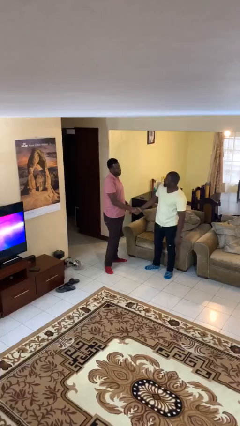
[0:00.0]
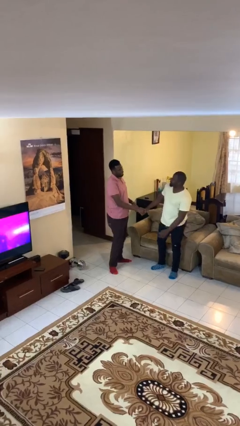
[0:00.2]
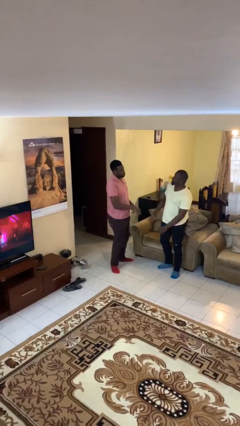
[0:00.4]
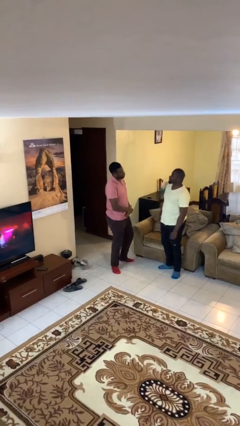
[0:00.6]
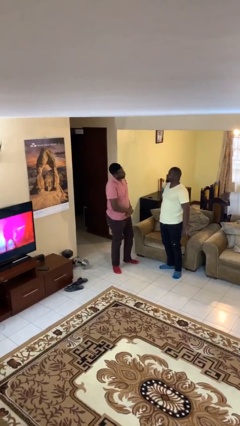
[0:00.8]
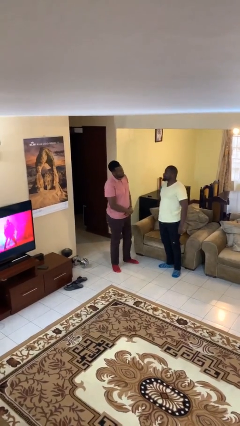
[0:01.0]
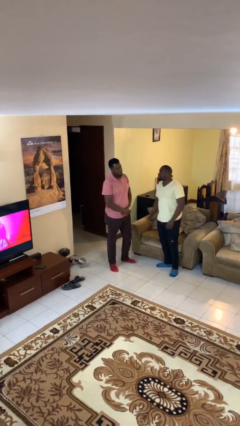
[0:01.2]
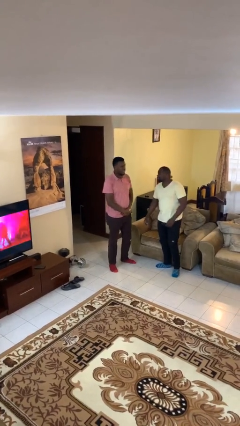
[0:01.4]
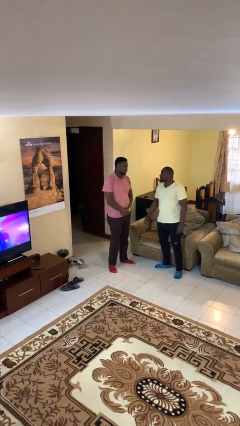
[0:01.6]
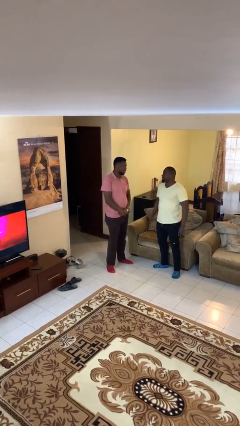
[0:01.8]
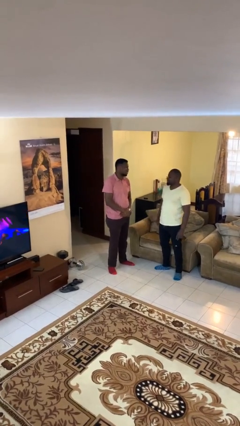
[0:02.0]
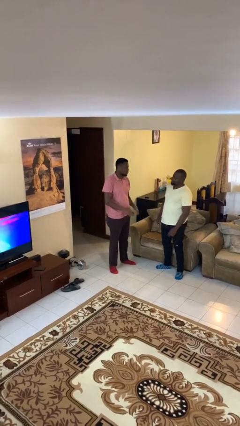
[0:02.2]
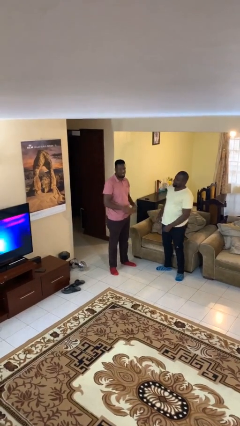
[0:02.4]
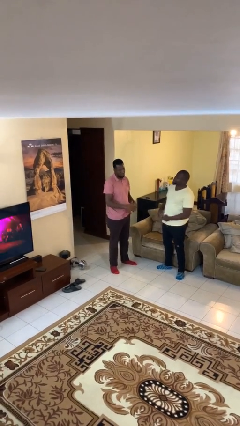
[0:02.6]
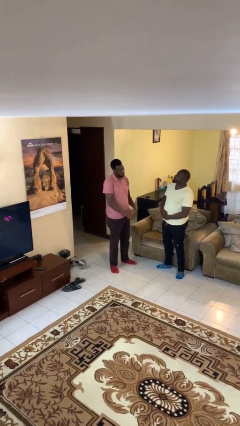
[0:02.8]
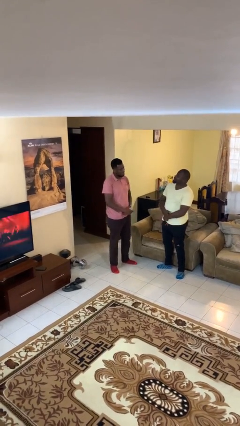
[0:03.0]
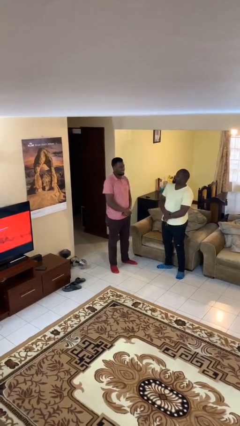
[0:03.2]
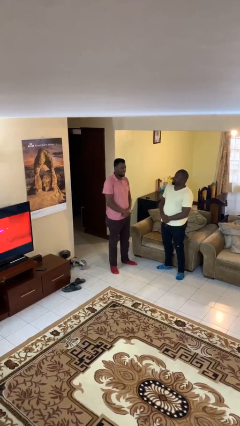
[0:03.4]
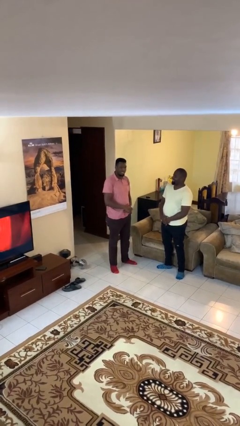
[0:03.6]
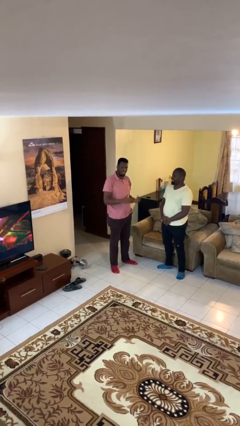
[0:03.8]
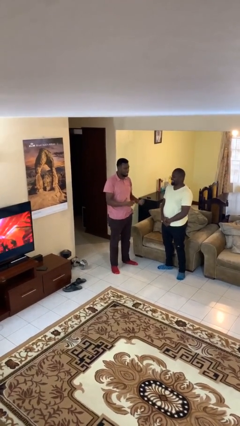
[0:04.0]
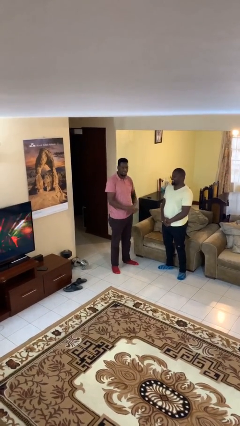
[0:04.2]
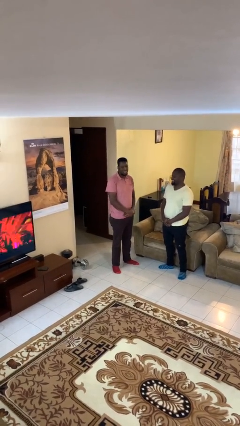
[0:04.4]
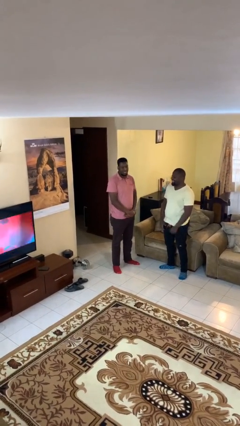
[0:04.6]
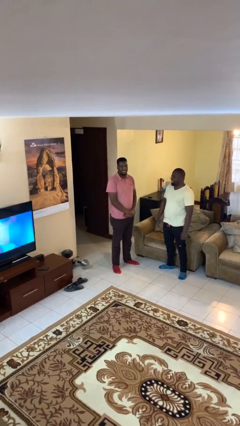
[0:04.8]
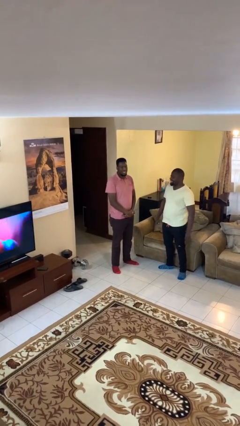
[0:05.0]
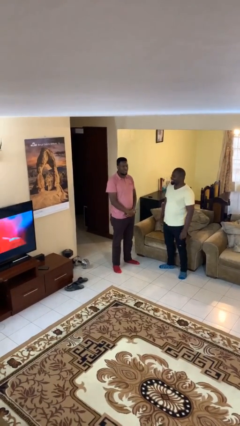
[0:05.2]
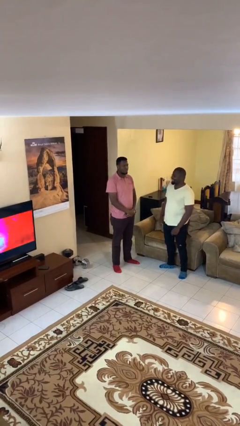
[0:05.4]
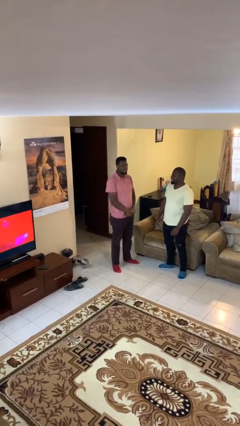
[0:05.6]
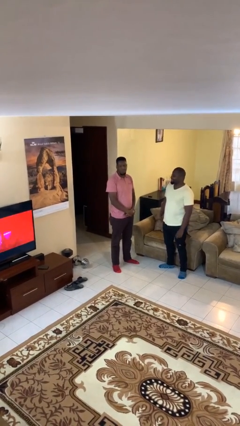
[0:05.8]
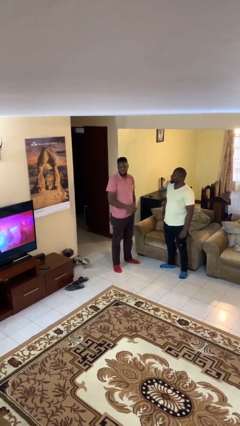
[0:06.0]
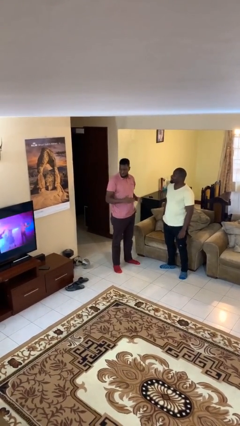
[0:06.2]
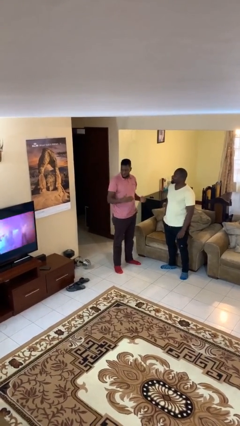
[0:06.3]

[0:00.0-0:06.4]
person talks to person

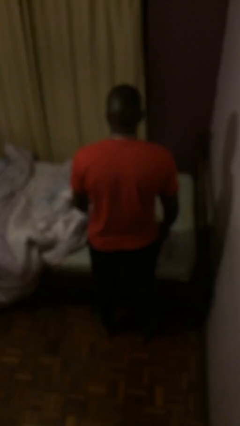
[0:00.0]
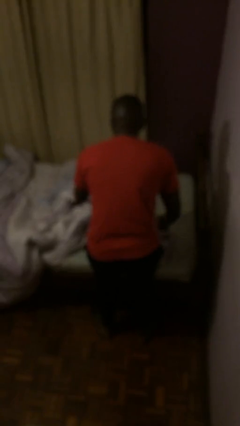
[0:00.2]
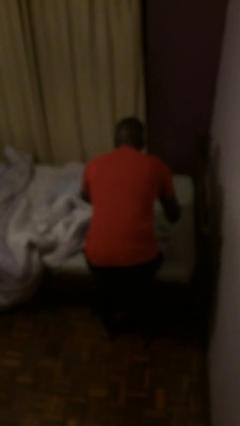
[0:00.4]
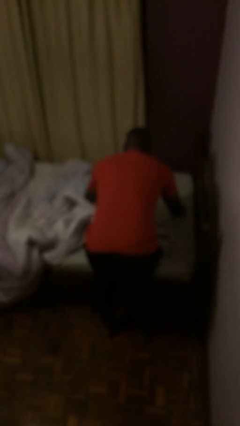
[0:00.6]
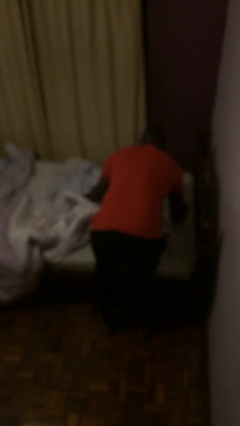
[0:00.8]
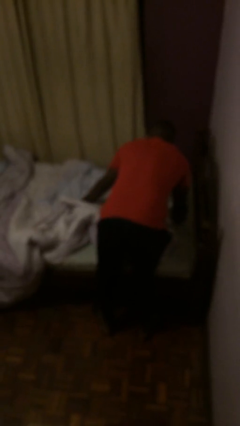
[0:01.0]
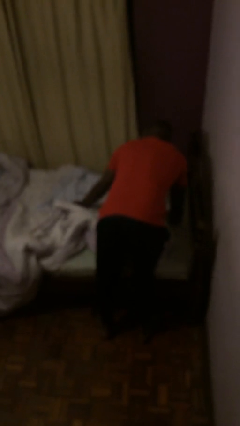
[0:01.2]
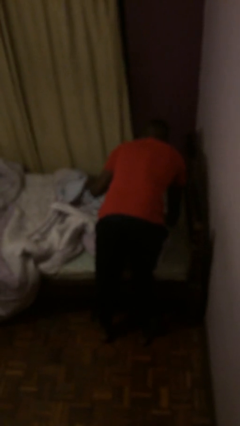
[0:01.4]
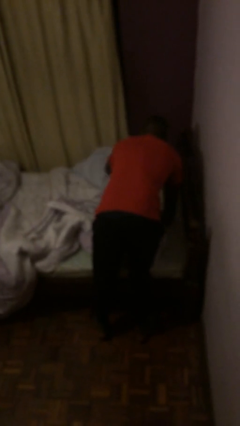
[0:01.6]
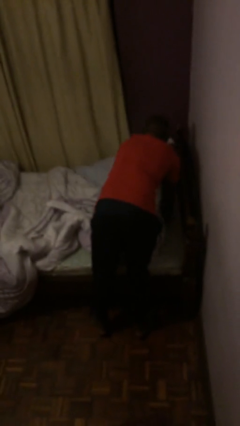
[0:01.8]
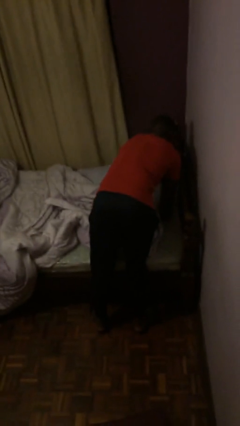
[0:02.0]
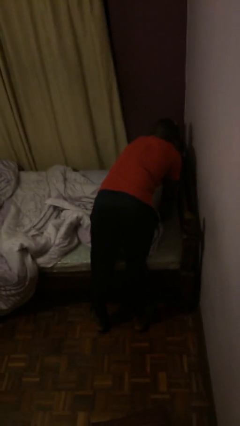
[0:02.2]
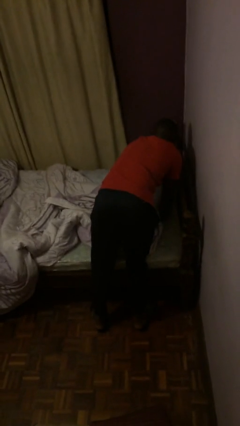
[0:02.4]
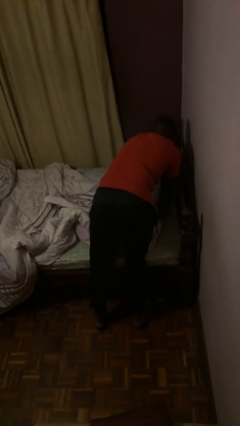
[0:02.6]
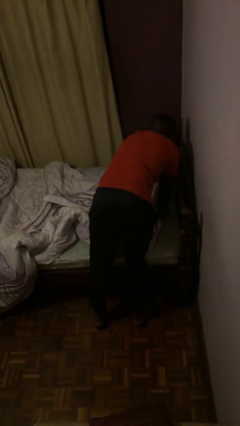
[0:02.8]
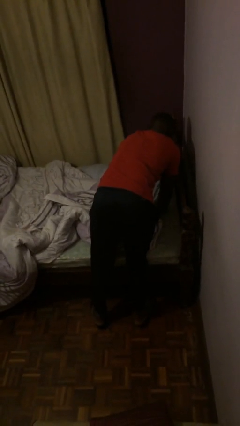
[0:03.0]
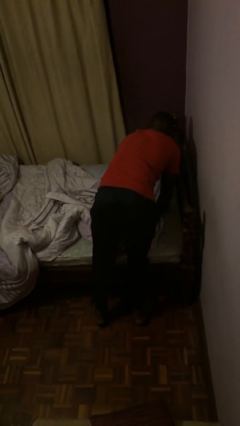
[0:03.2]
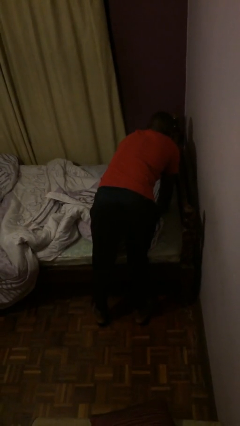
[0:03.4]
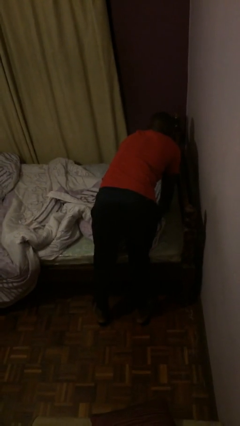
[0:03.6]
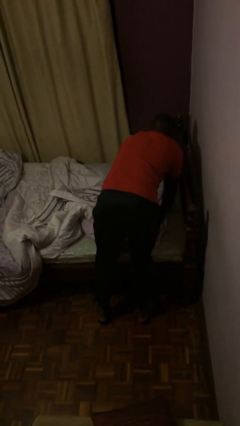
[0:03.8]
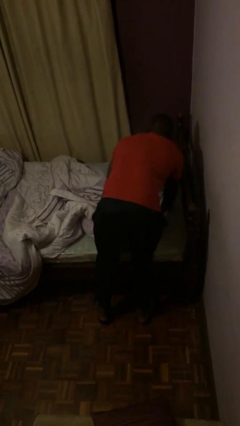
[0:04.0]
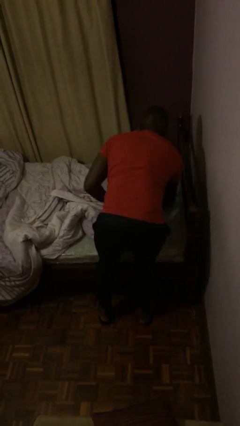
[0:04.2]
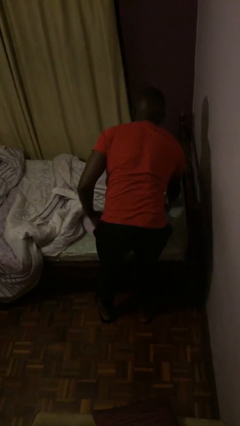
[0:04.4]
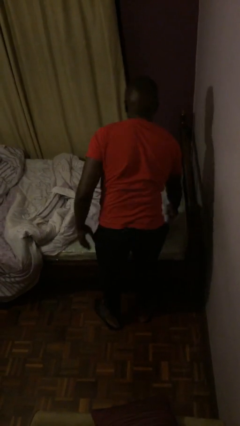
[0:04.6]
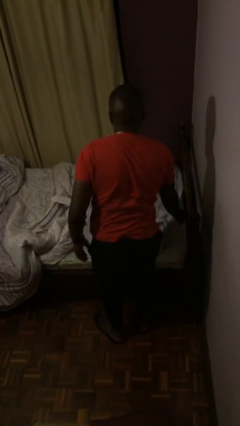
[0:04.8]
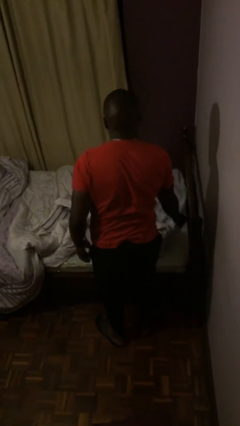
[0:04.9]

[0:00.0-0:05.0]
person makes bed

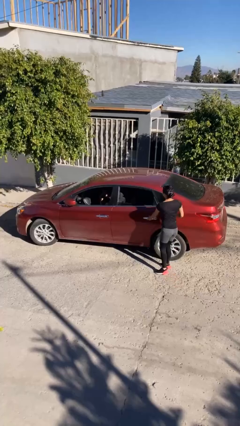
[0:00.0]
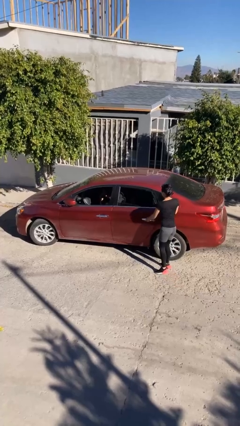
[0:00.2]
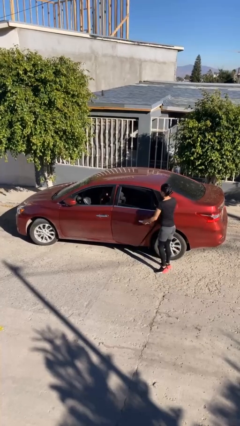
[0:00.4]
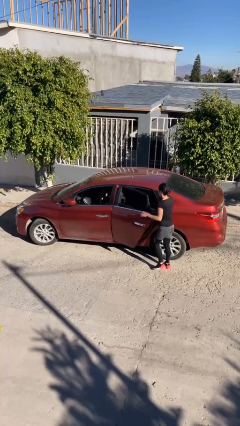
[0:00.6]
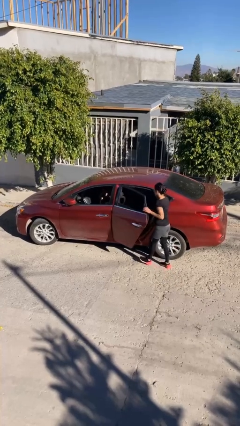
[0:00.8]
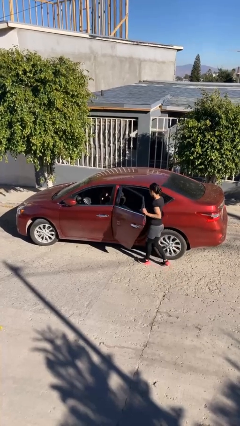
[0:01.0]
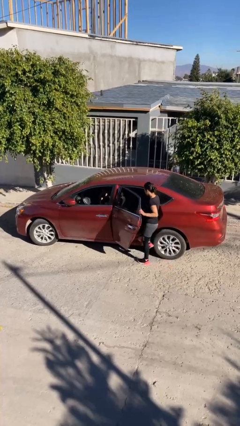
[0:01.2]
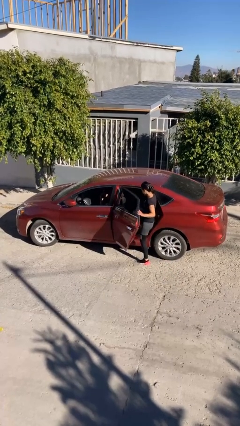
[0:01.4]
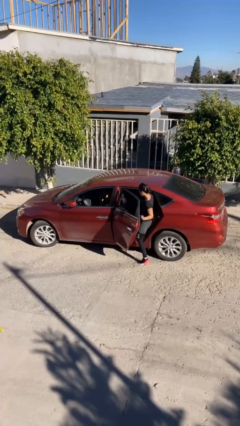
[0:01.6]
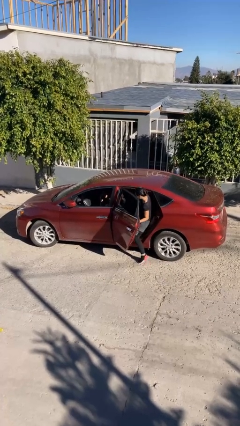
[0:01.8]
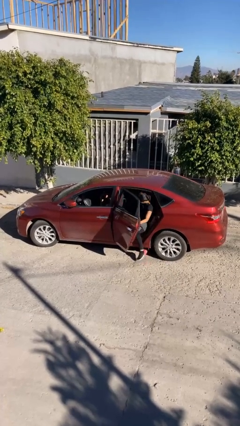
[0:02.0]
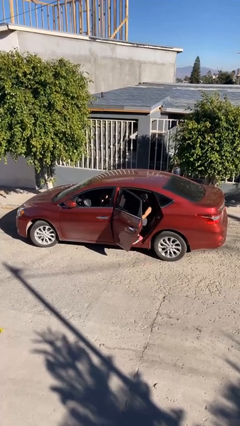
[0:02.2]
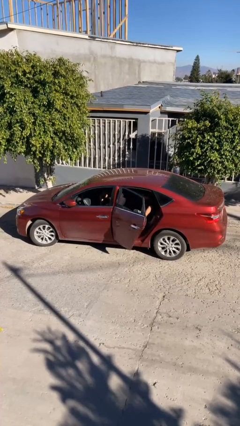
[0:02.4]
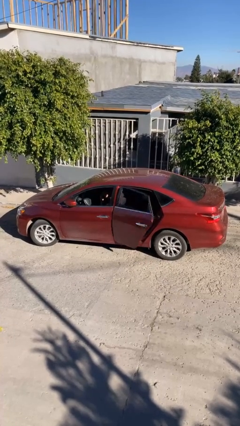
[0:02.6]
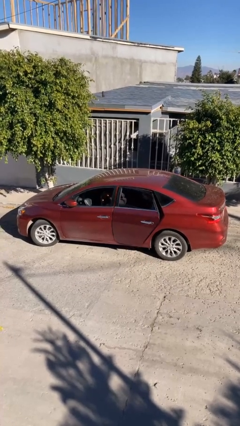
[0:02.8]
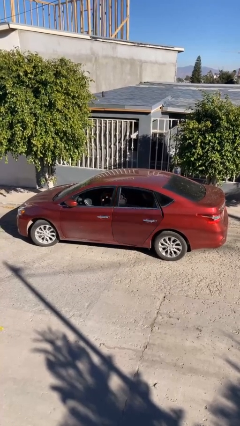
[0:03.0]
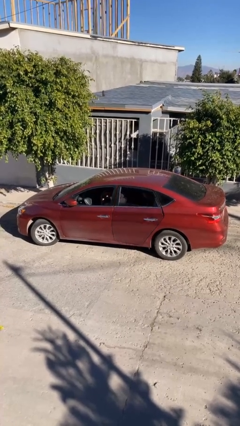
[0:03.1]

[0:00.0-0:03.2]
car picks up person

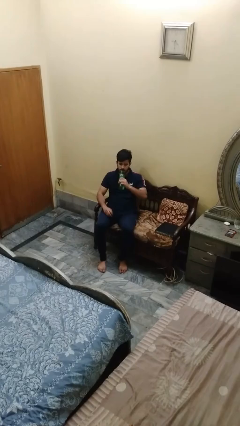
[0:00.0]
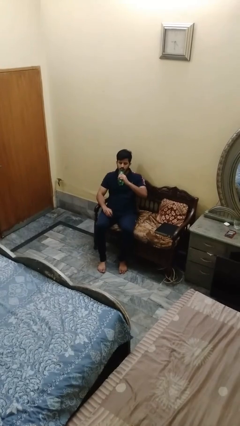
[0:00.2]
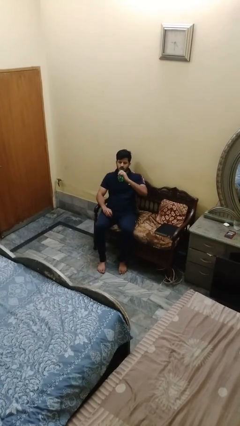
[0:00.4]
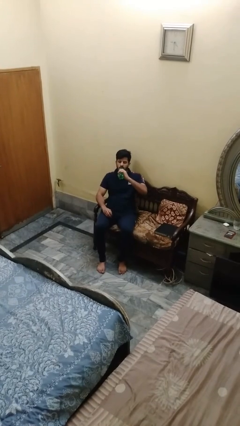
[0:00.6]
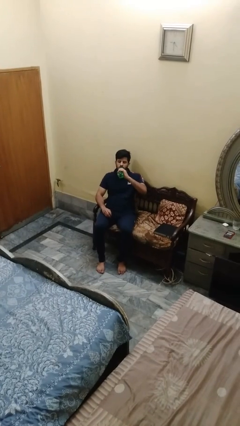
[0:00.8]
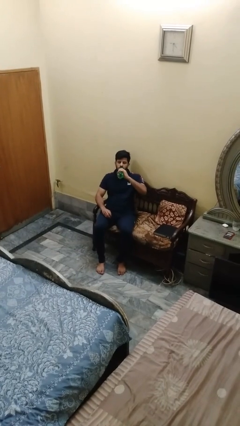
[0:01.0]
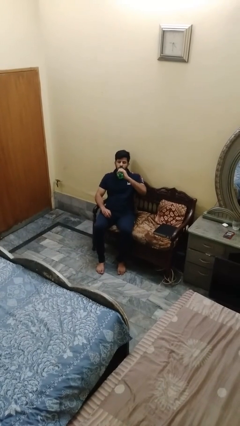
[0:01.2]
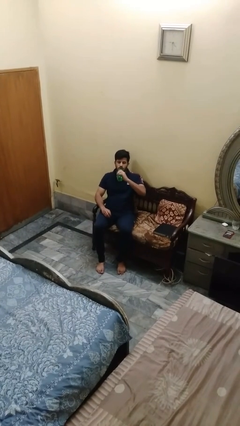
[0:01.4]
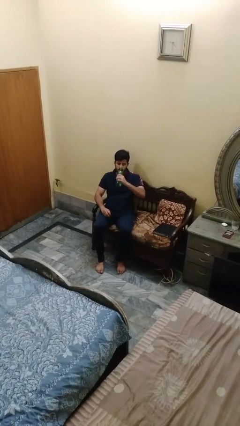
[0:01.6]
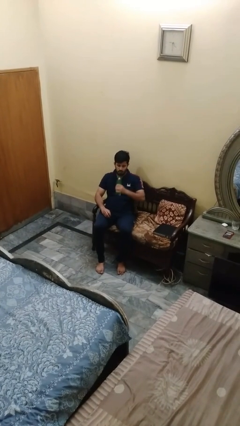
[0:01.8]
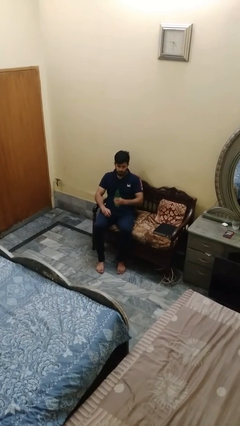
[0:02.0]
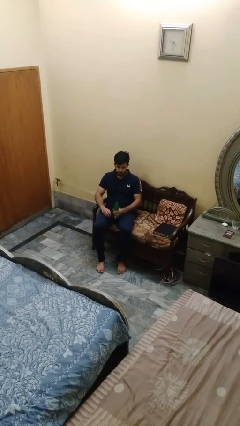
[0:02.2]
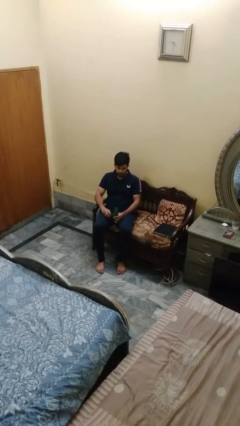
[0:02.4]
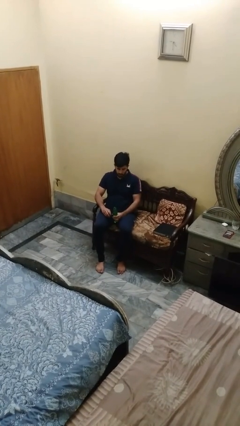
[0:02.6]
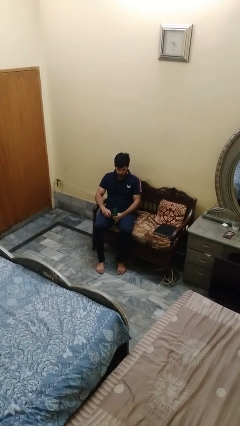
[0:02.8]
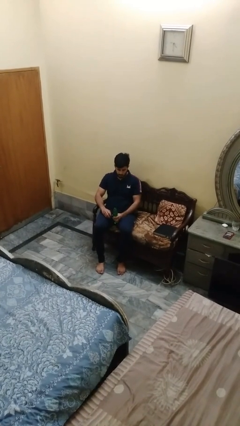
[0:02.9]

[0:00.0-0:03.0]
person drinks from bottle

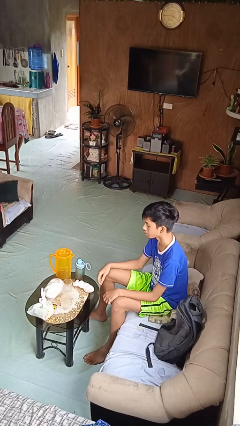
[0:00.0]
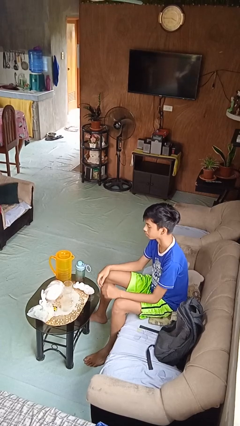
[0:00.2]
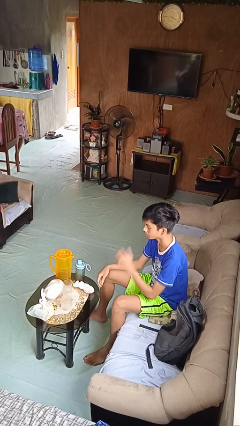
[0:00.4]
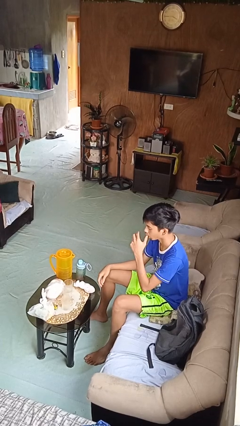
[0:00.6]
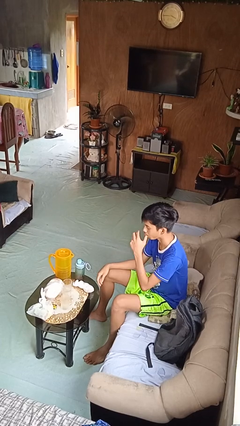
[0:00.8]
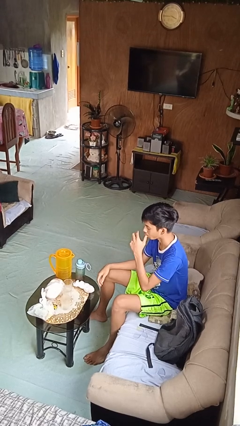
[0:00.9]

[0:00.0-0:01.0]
person licks fingers
